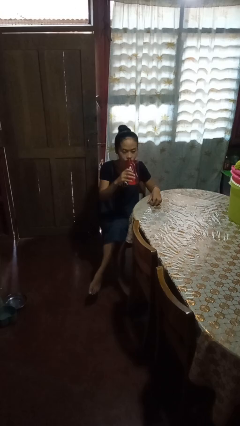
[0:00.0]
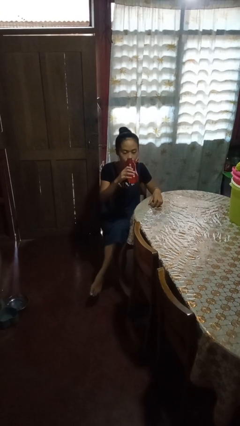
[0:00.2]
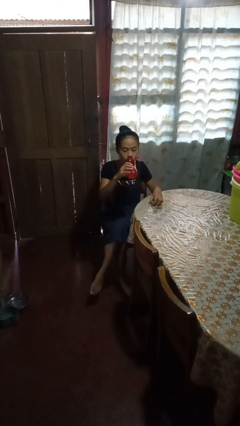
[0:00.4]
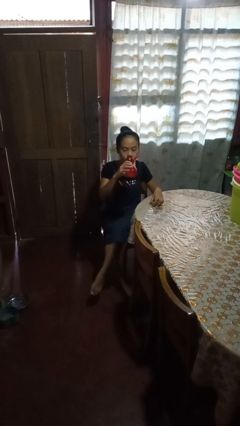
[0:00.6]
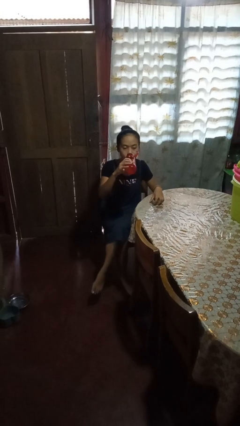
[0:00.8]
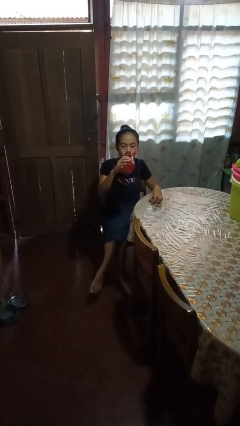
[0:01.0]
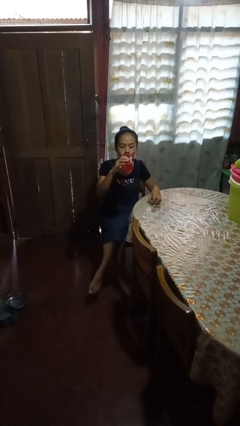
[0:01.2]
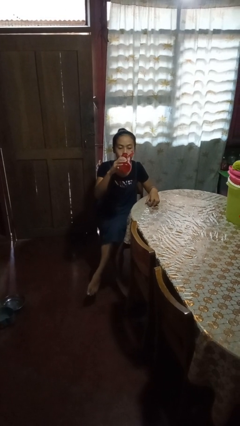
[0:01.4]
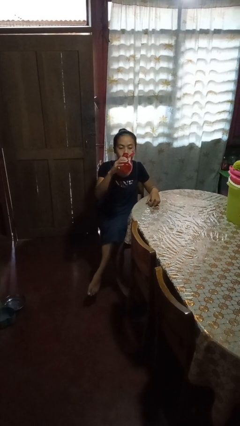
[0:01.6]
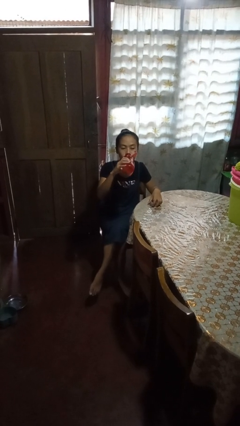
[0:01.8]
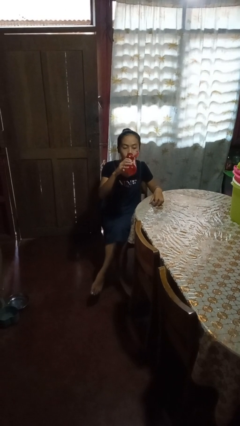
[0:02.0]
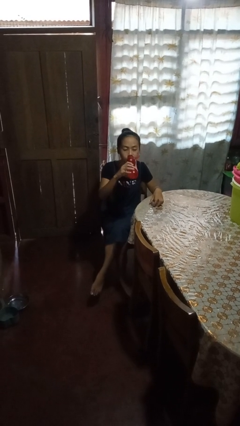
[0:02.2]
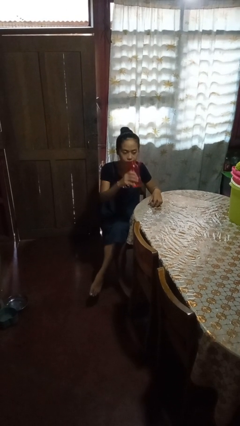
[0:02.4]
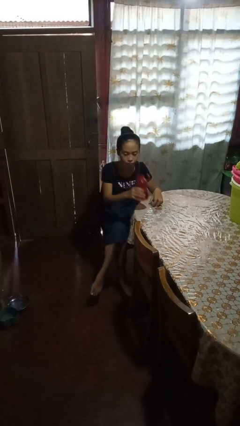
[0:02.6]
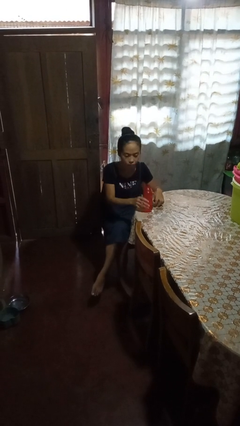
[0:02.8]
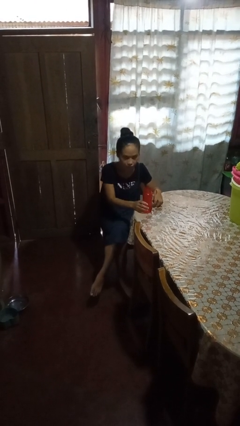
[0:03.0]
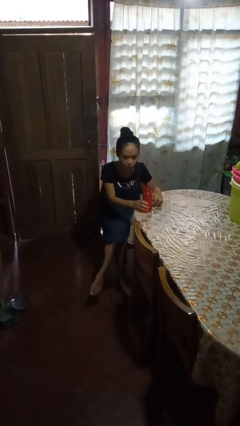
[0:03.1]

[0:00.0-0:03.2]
person drinks from bottle

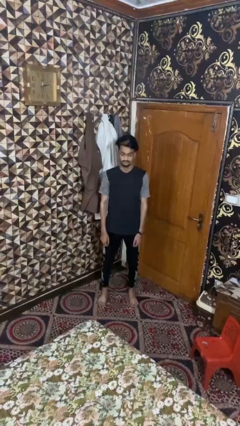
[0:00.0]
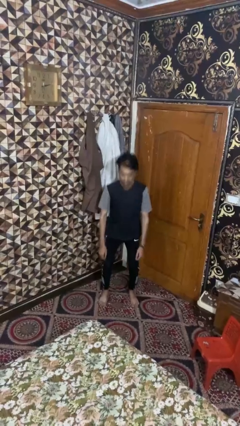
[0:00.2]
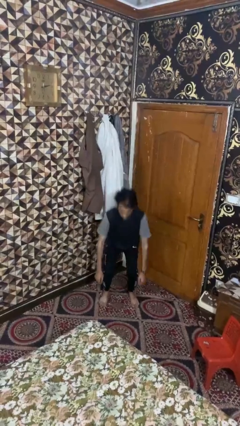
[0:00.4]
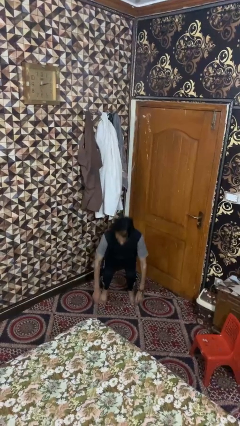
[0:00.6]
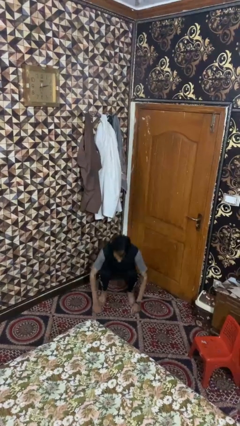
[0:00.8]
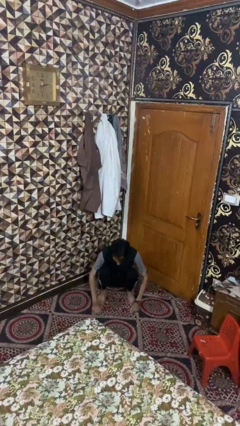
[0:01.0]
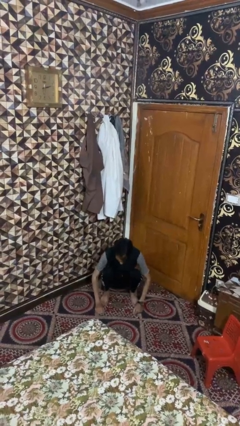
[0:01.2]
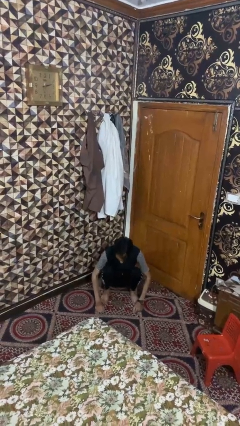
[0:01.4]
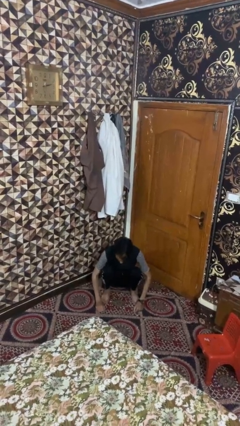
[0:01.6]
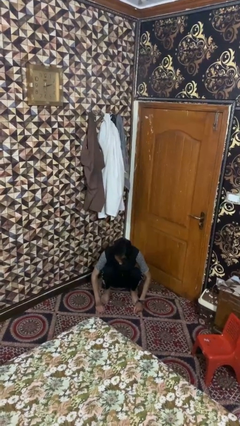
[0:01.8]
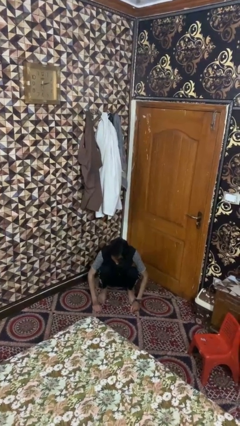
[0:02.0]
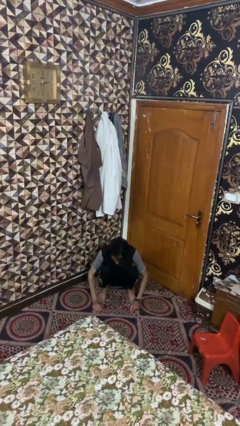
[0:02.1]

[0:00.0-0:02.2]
person squats

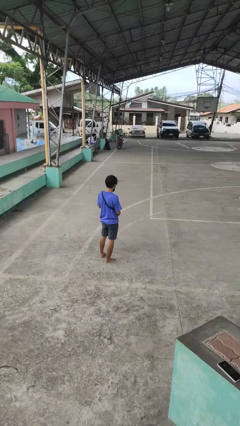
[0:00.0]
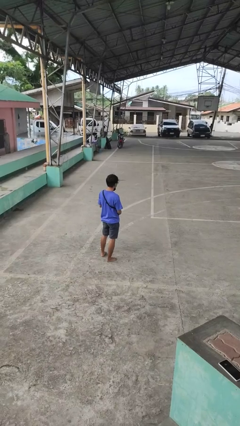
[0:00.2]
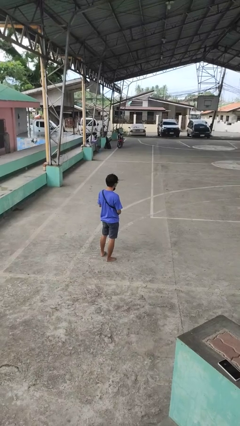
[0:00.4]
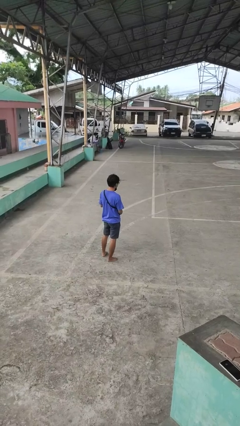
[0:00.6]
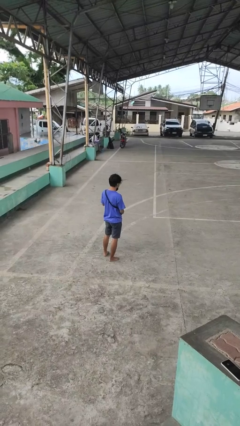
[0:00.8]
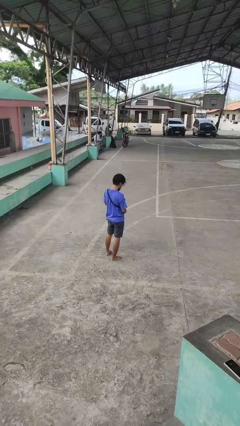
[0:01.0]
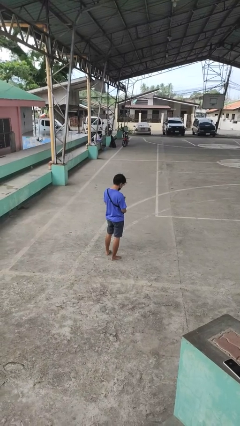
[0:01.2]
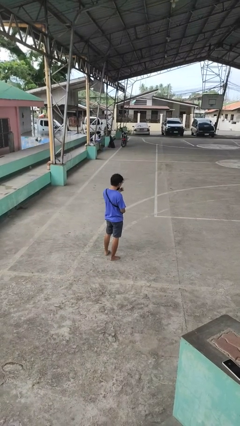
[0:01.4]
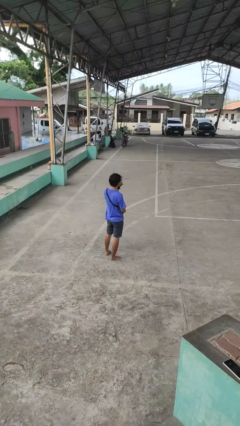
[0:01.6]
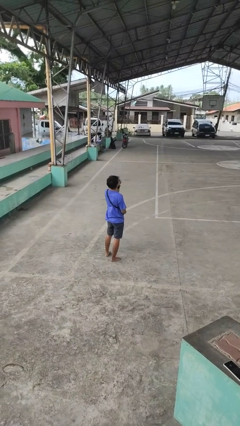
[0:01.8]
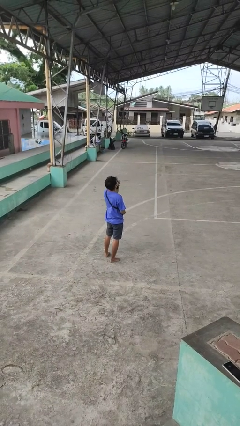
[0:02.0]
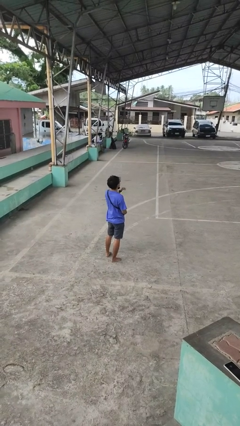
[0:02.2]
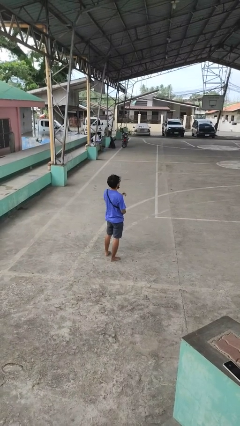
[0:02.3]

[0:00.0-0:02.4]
person eats snack from bag

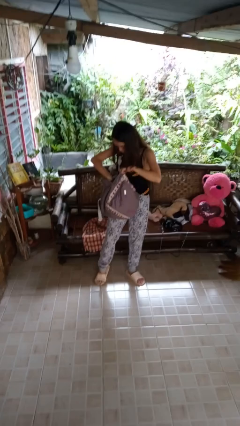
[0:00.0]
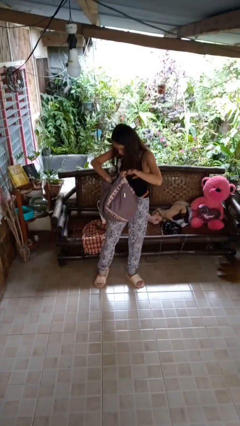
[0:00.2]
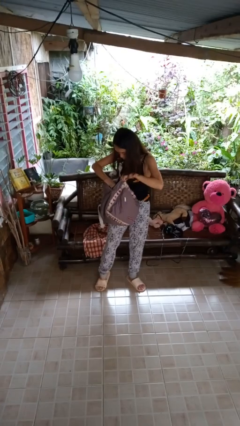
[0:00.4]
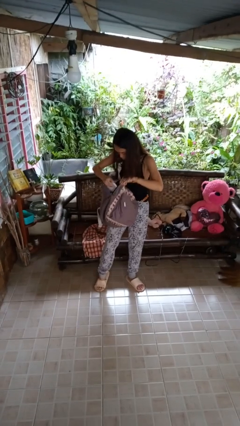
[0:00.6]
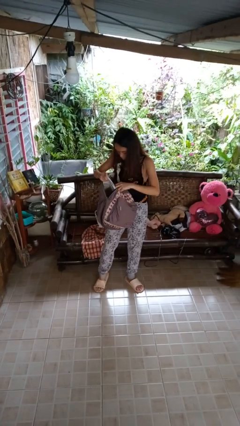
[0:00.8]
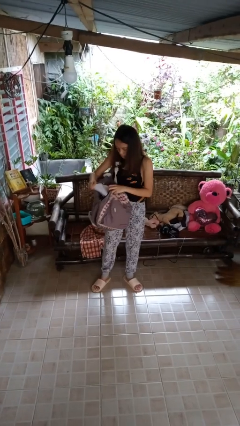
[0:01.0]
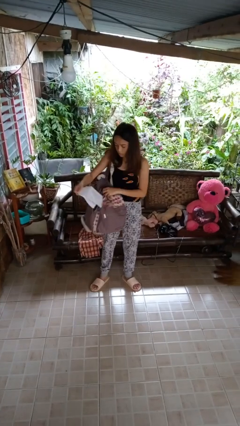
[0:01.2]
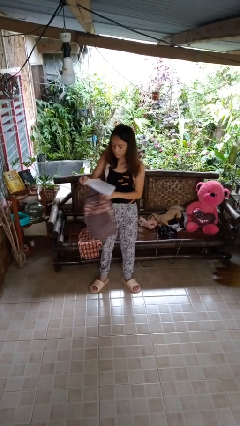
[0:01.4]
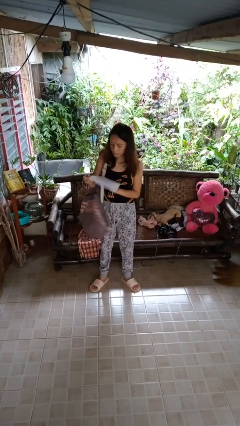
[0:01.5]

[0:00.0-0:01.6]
person takes object from backpack

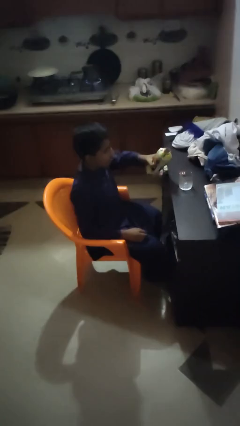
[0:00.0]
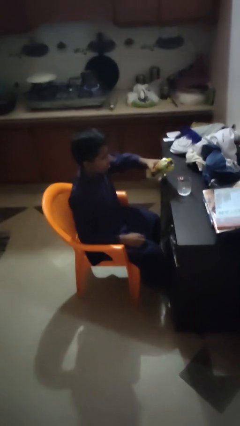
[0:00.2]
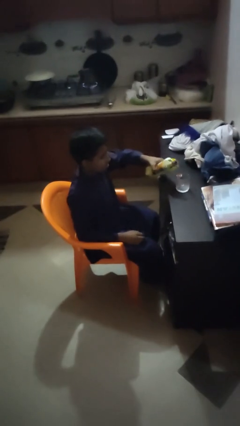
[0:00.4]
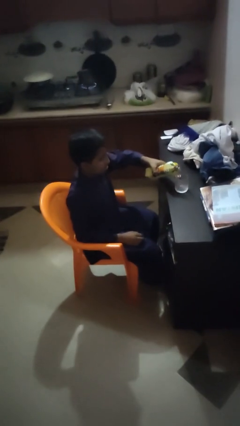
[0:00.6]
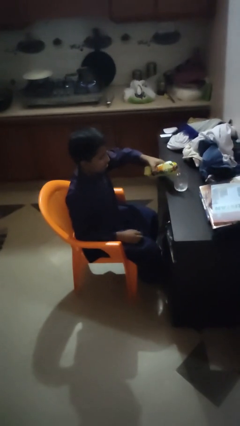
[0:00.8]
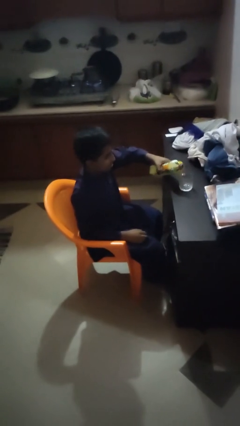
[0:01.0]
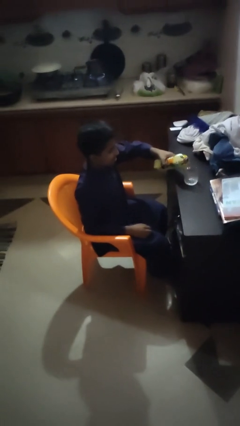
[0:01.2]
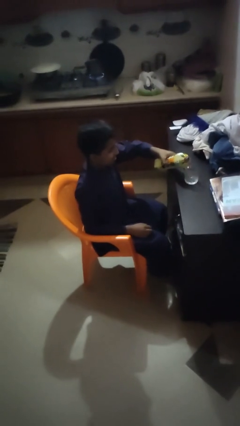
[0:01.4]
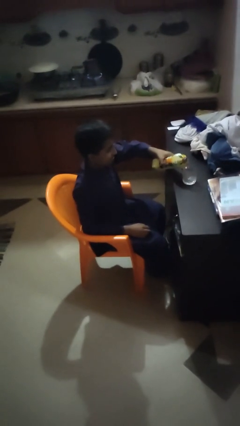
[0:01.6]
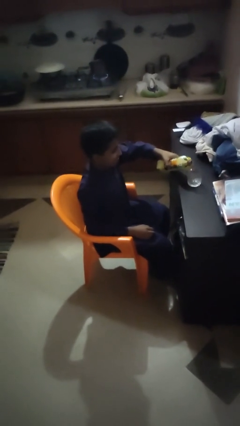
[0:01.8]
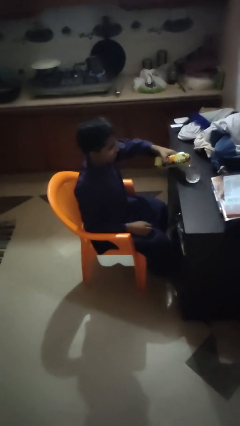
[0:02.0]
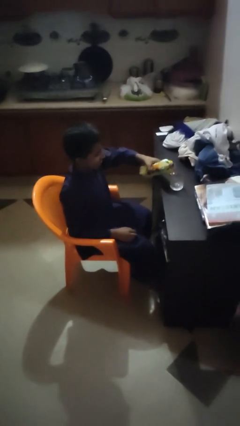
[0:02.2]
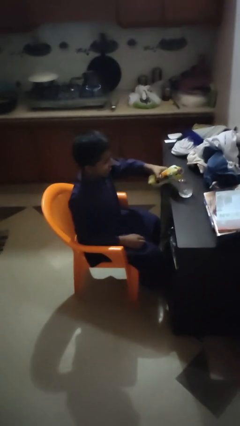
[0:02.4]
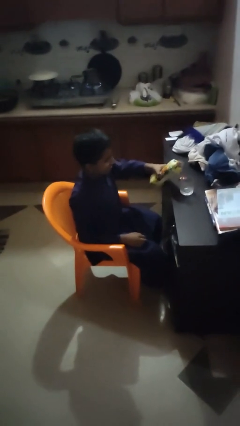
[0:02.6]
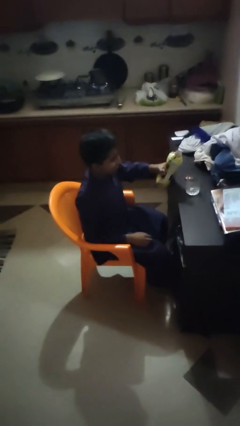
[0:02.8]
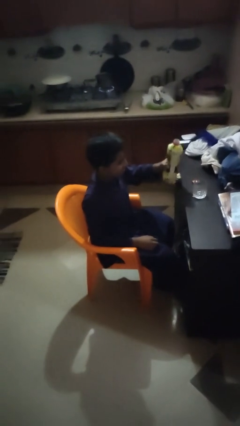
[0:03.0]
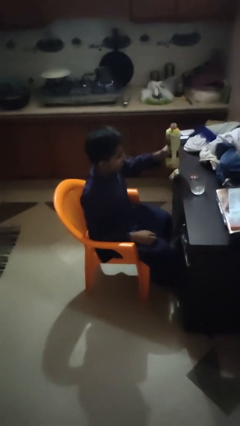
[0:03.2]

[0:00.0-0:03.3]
person pours liquid into cup

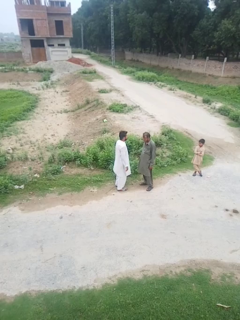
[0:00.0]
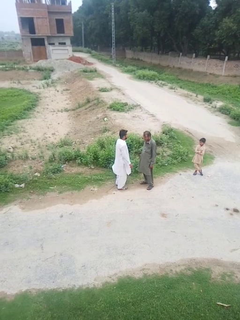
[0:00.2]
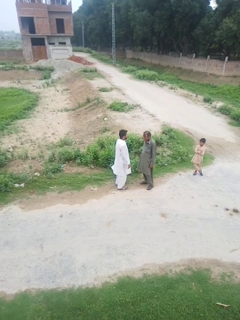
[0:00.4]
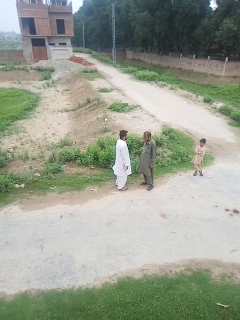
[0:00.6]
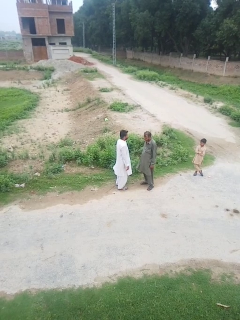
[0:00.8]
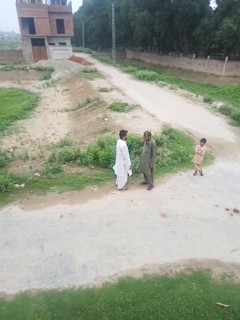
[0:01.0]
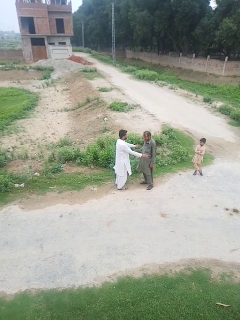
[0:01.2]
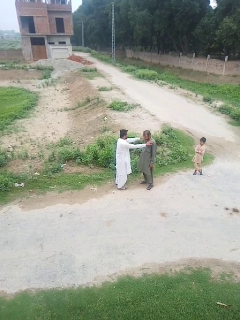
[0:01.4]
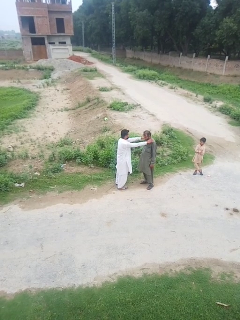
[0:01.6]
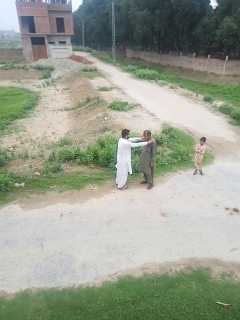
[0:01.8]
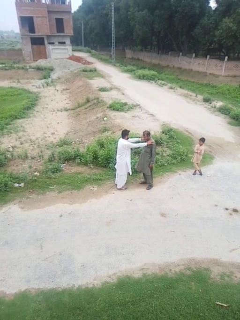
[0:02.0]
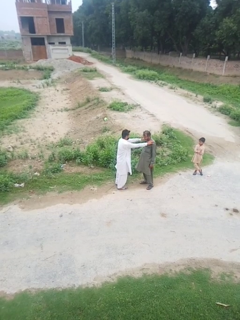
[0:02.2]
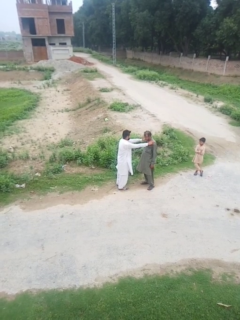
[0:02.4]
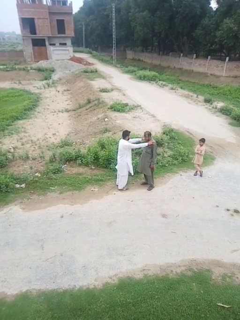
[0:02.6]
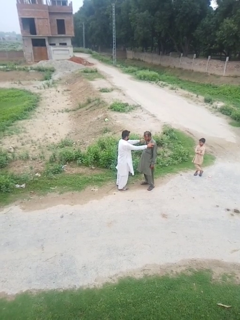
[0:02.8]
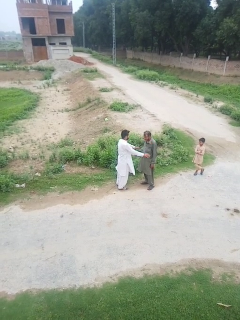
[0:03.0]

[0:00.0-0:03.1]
person pounds shoulders of person

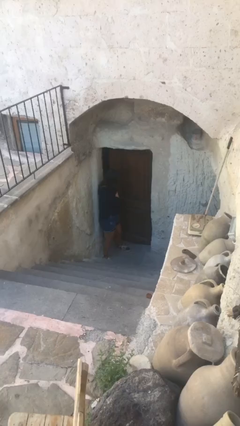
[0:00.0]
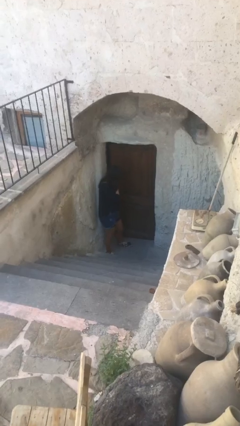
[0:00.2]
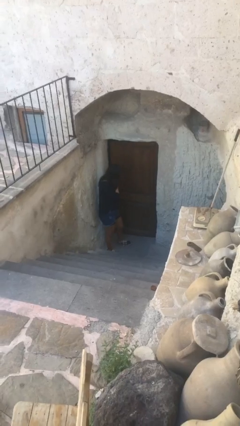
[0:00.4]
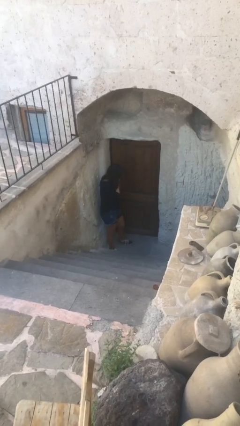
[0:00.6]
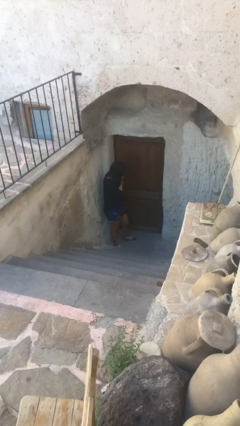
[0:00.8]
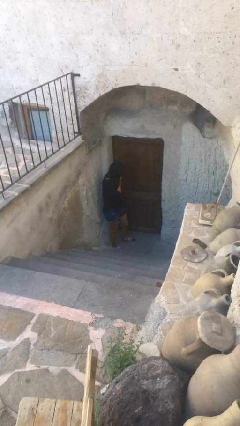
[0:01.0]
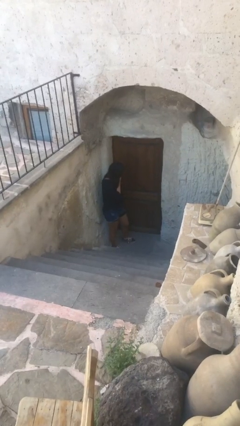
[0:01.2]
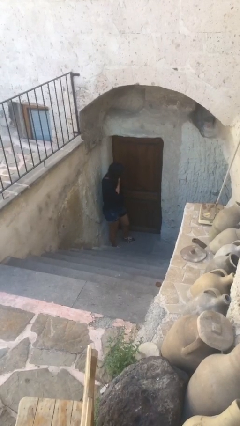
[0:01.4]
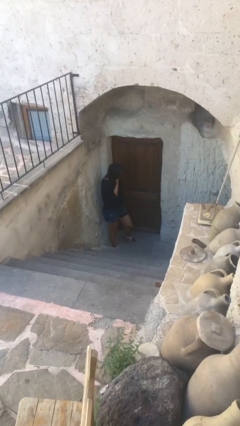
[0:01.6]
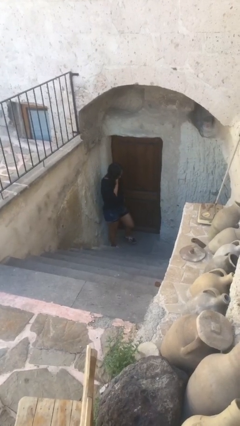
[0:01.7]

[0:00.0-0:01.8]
person closes facility door

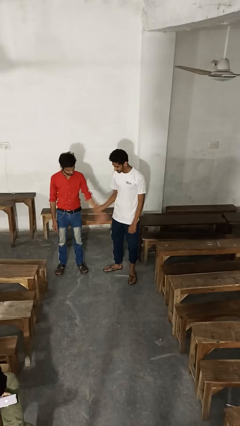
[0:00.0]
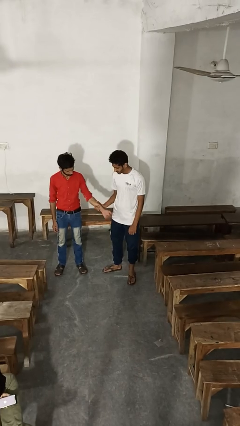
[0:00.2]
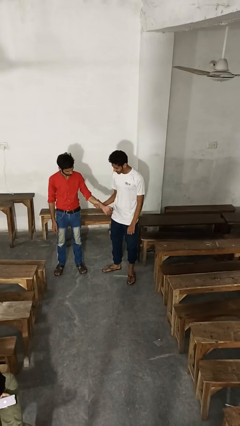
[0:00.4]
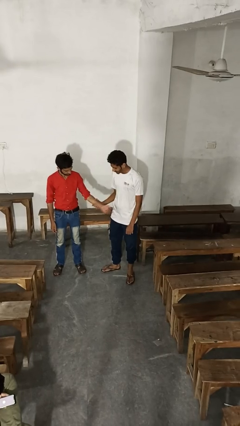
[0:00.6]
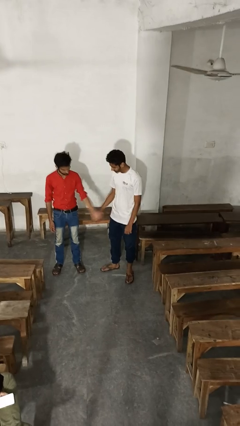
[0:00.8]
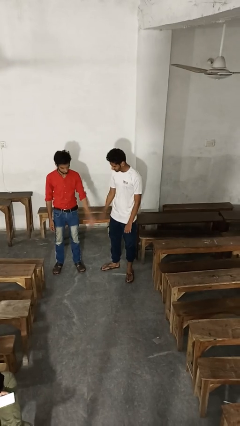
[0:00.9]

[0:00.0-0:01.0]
person grabs person by forearm
